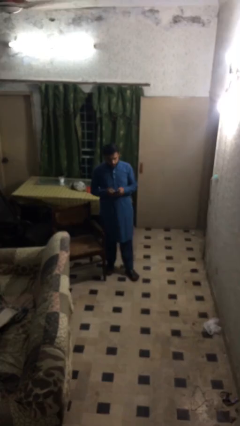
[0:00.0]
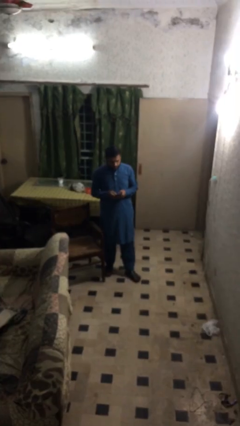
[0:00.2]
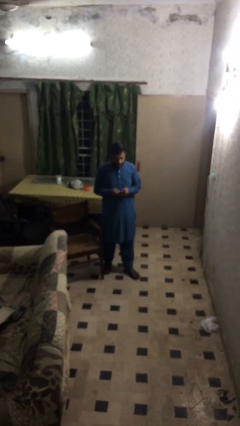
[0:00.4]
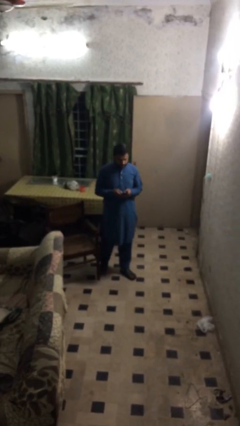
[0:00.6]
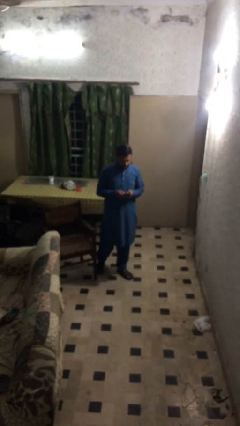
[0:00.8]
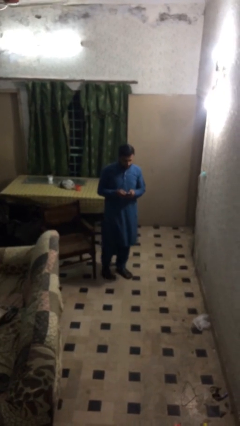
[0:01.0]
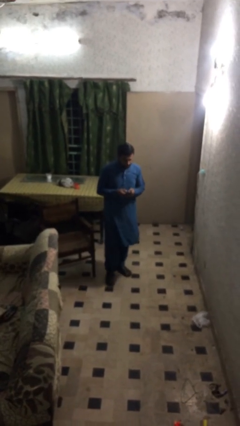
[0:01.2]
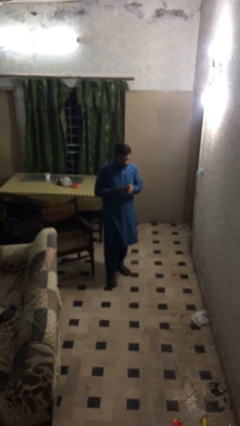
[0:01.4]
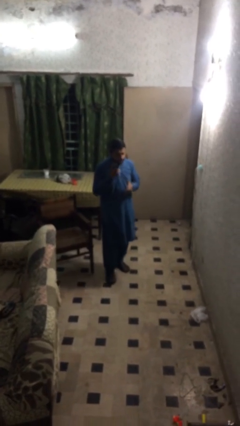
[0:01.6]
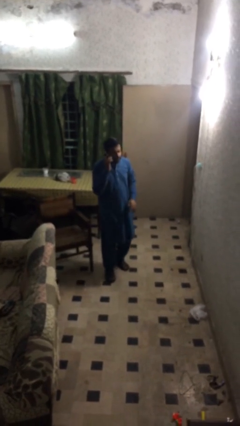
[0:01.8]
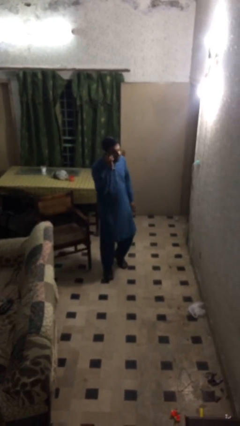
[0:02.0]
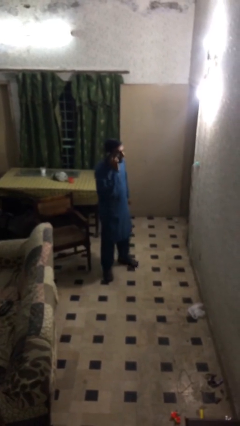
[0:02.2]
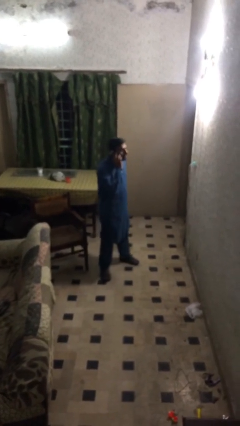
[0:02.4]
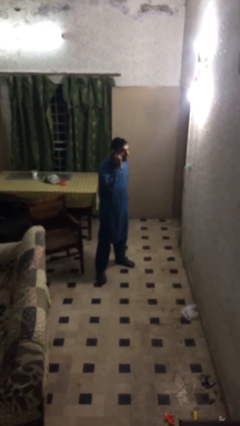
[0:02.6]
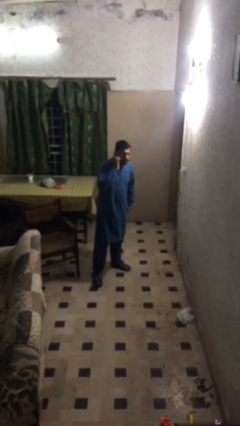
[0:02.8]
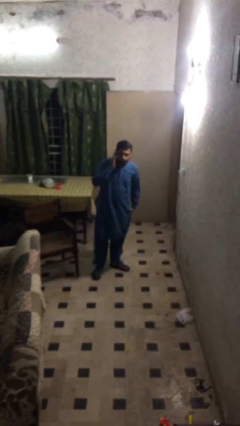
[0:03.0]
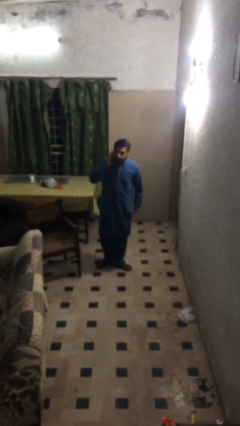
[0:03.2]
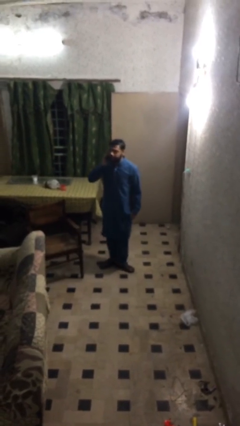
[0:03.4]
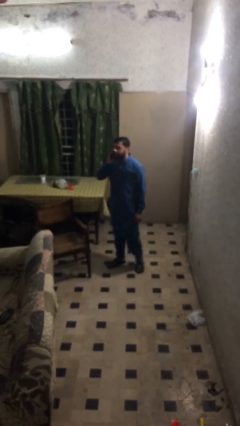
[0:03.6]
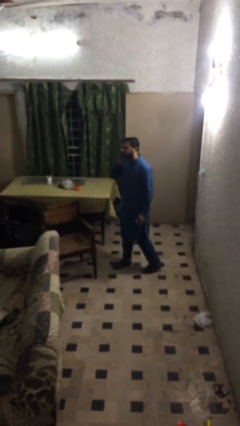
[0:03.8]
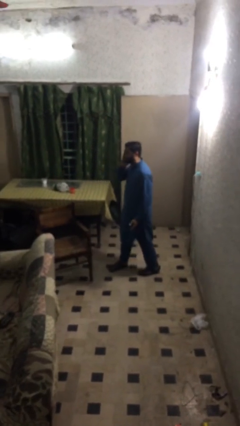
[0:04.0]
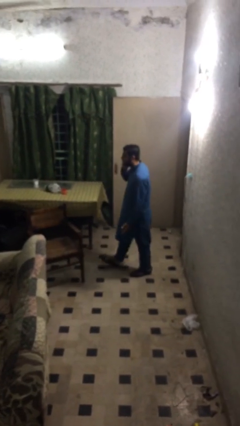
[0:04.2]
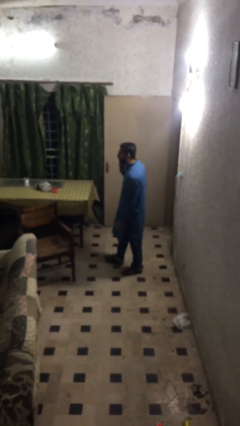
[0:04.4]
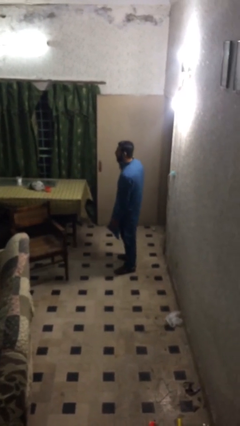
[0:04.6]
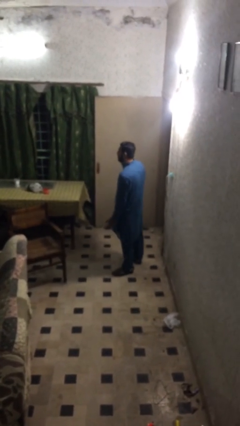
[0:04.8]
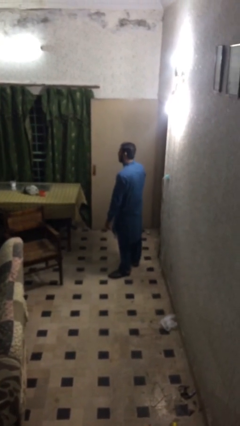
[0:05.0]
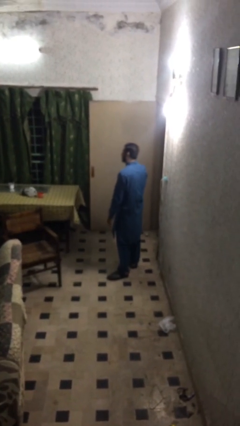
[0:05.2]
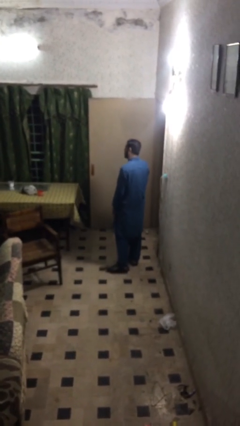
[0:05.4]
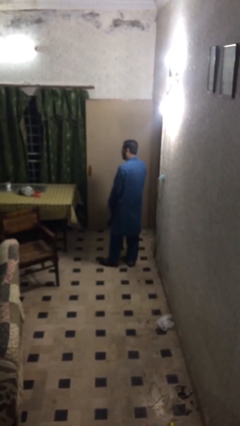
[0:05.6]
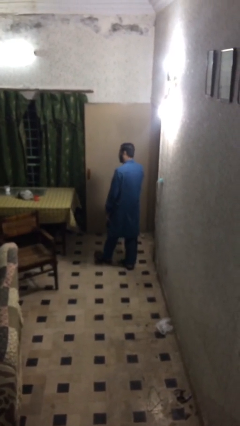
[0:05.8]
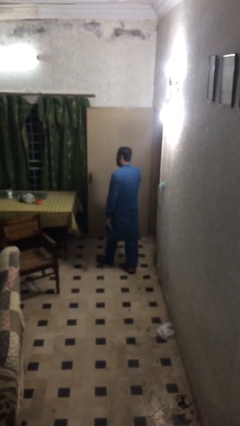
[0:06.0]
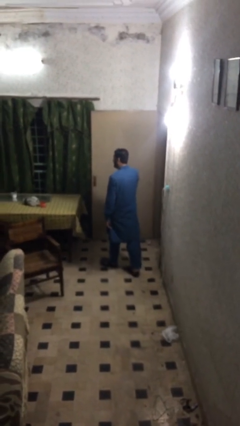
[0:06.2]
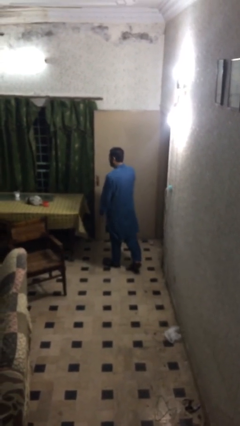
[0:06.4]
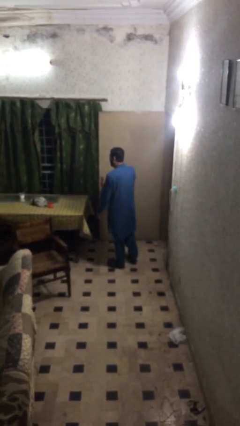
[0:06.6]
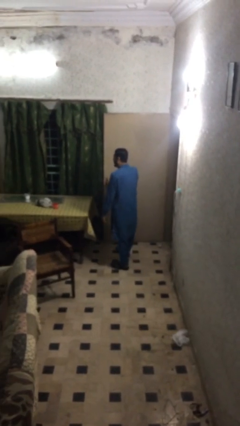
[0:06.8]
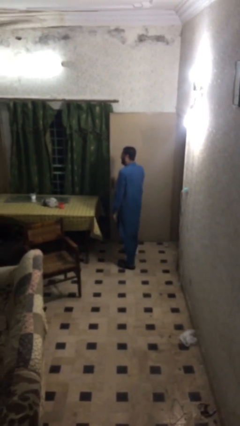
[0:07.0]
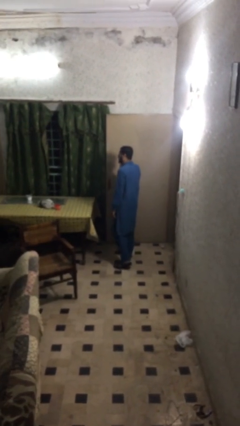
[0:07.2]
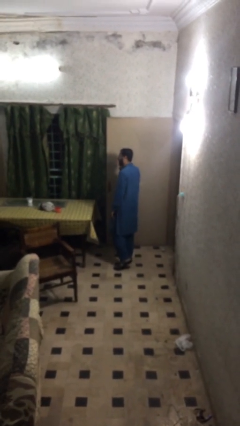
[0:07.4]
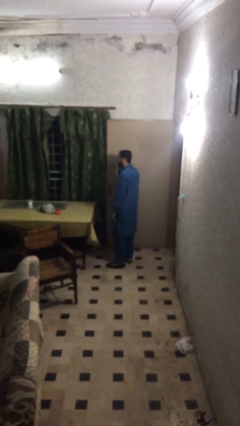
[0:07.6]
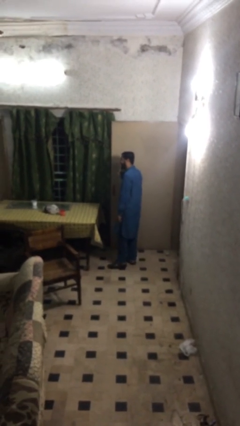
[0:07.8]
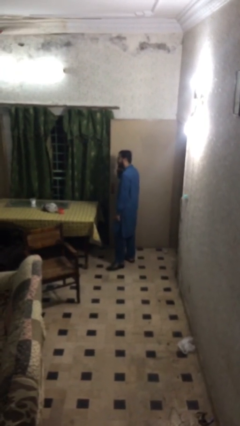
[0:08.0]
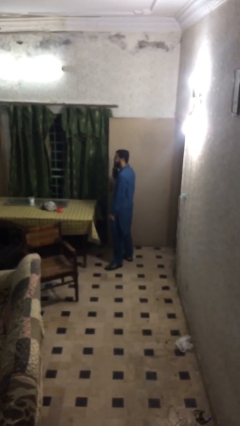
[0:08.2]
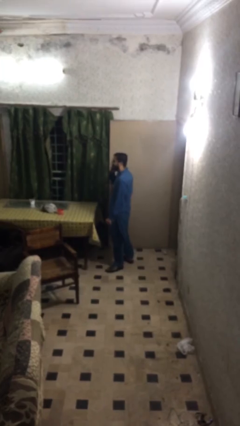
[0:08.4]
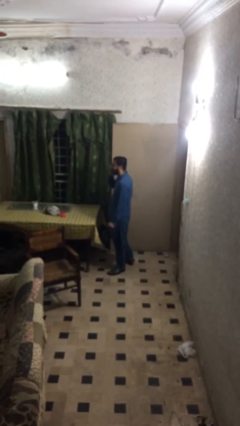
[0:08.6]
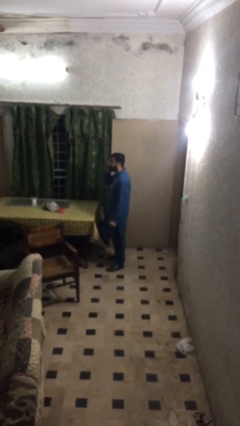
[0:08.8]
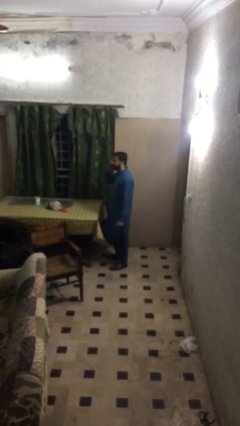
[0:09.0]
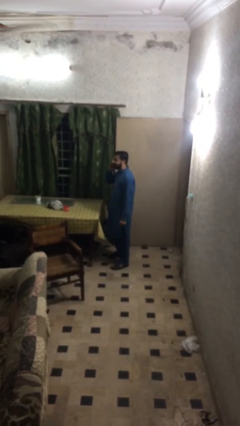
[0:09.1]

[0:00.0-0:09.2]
person talks on phone

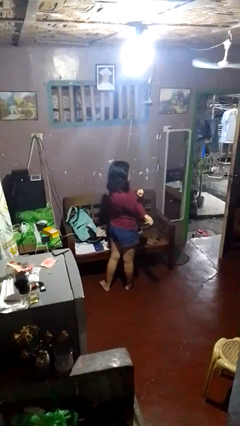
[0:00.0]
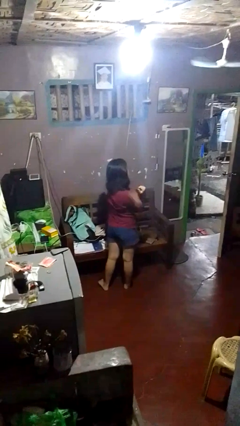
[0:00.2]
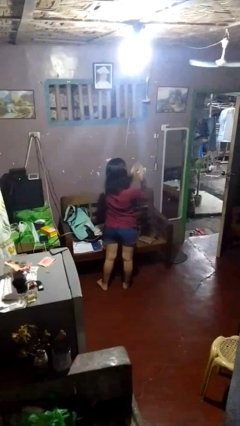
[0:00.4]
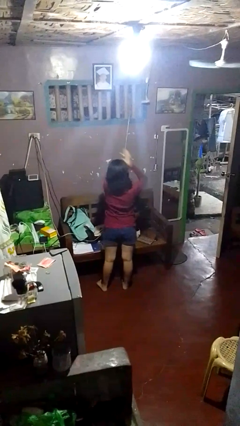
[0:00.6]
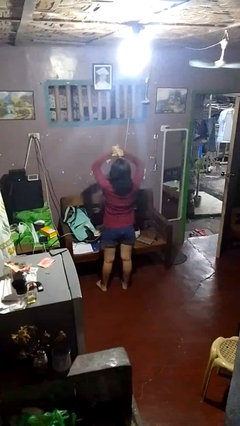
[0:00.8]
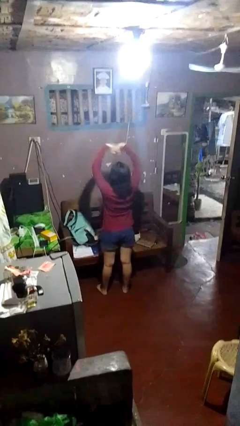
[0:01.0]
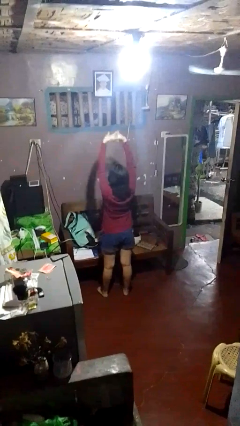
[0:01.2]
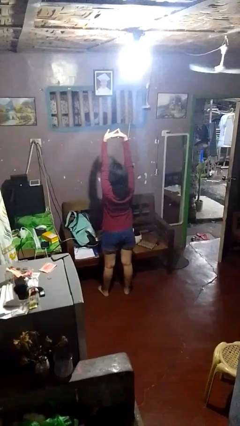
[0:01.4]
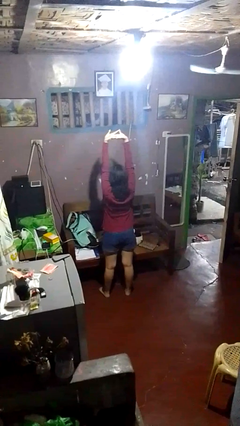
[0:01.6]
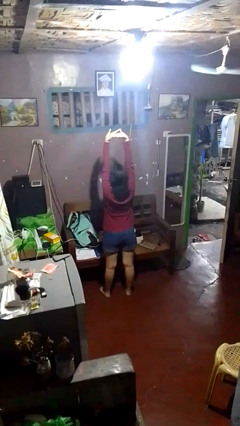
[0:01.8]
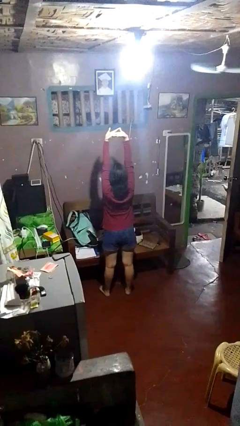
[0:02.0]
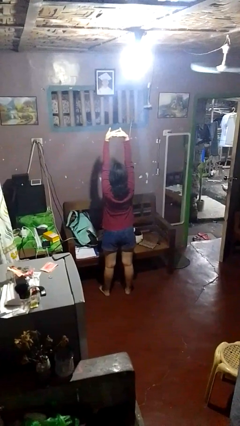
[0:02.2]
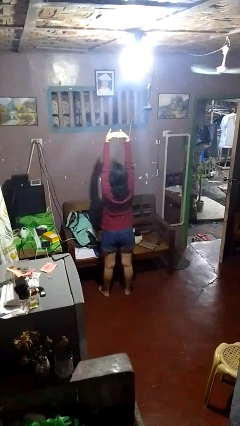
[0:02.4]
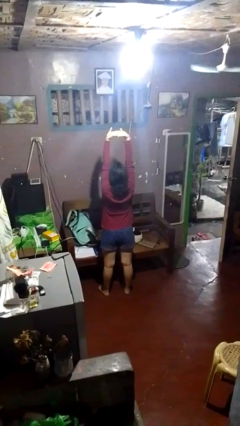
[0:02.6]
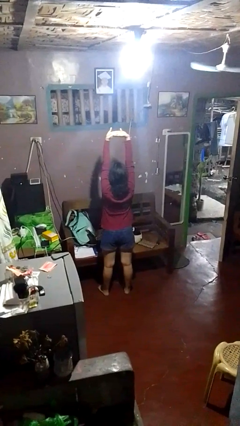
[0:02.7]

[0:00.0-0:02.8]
person stretches arms over head

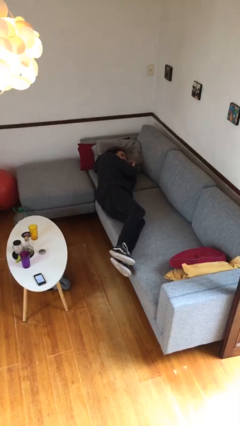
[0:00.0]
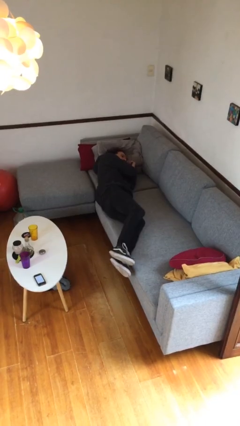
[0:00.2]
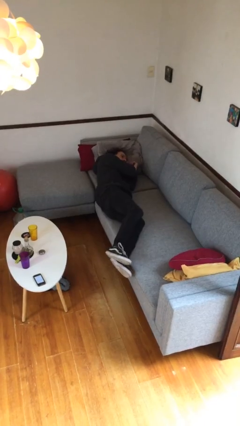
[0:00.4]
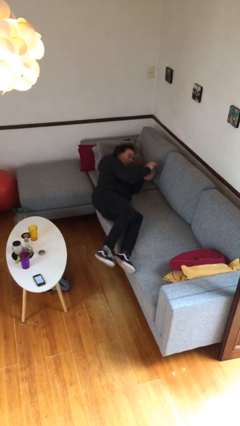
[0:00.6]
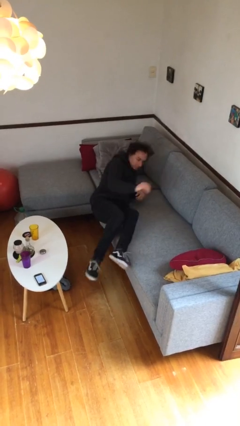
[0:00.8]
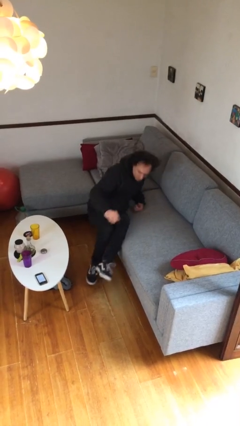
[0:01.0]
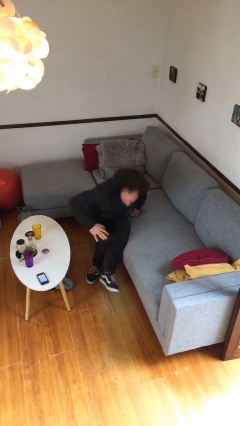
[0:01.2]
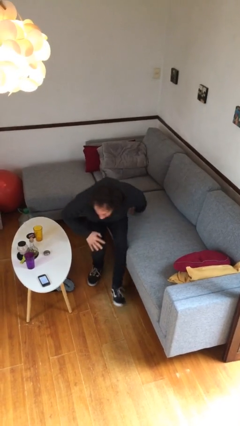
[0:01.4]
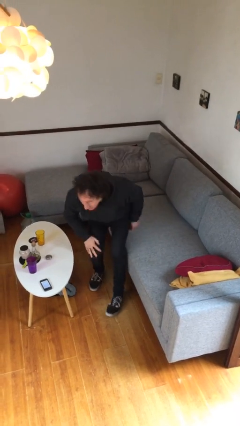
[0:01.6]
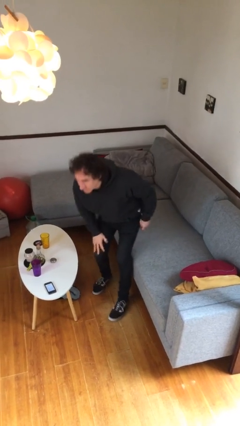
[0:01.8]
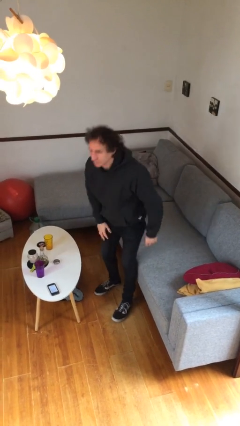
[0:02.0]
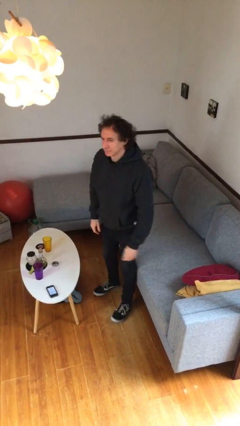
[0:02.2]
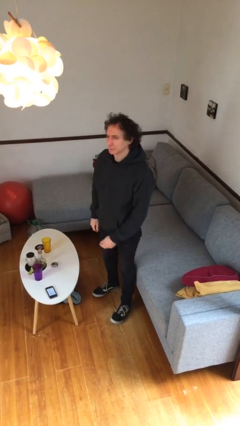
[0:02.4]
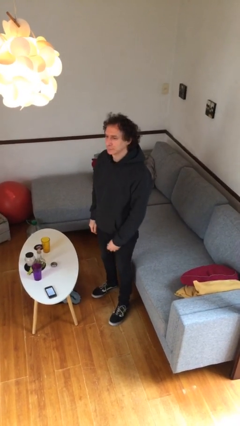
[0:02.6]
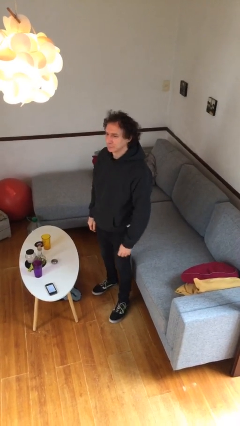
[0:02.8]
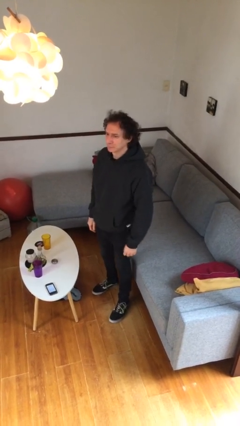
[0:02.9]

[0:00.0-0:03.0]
person stands up

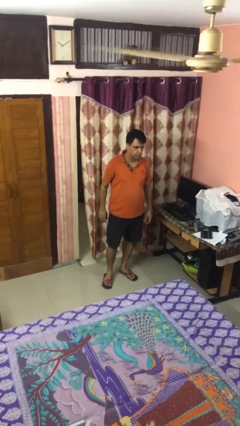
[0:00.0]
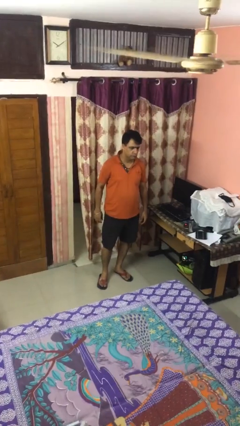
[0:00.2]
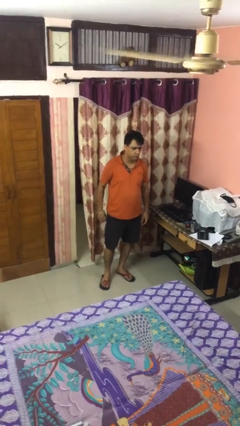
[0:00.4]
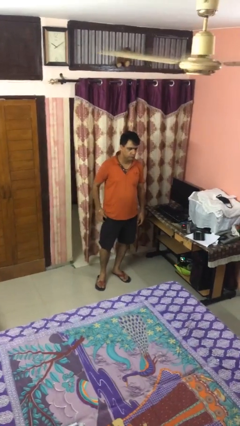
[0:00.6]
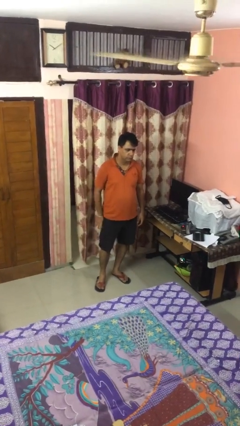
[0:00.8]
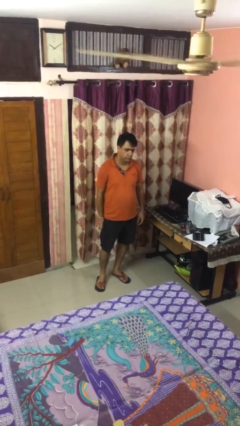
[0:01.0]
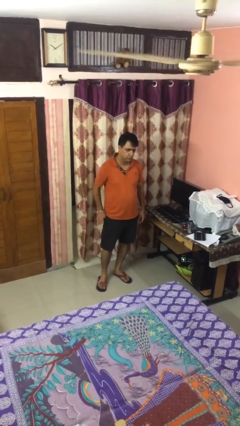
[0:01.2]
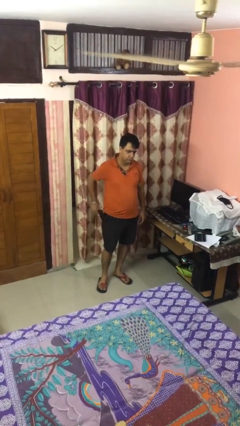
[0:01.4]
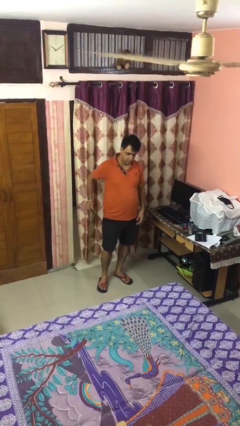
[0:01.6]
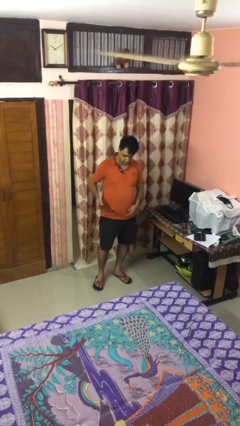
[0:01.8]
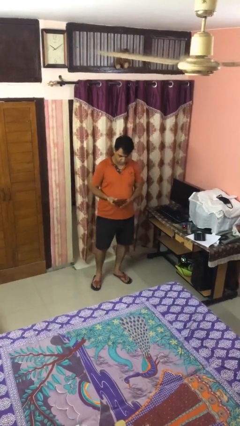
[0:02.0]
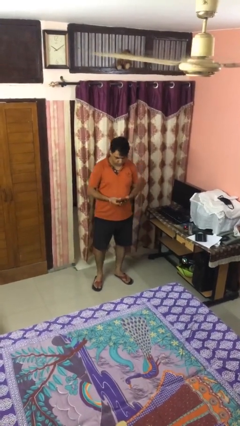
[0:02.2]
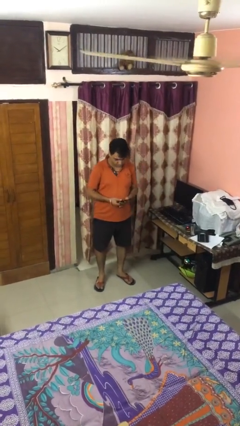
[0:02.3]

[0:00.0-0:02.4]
person takes phone from pocket

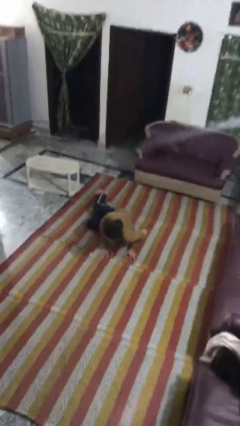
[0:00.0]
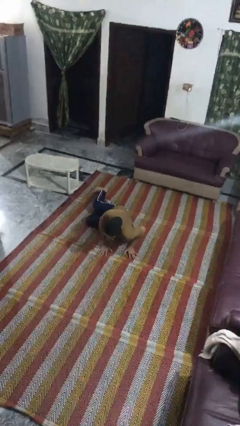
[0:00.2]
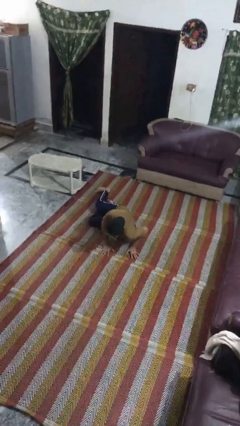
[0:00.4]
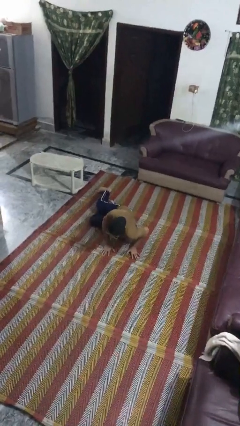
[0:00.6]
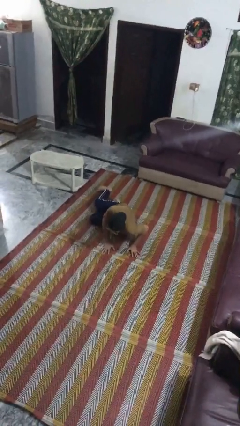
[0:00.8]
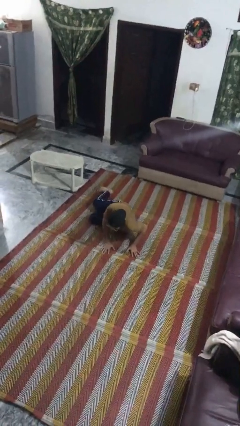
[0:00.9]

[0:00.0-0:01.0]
person lies down on floor
